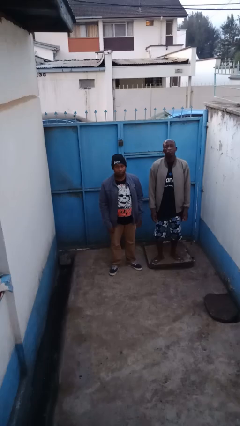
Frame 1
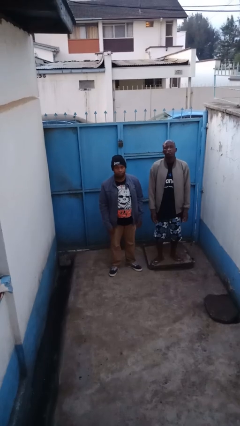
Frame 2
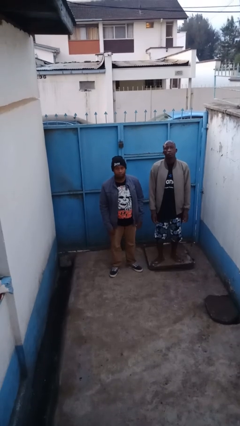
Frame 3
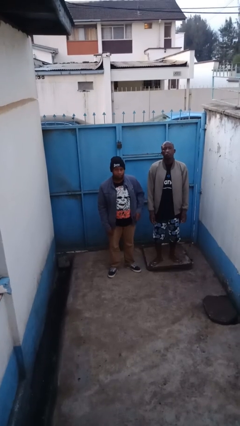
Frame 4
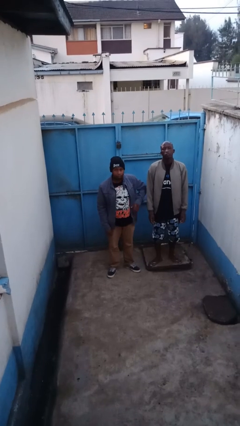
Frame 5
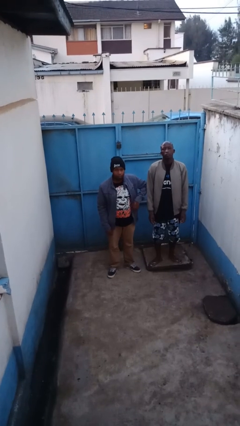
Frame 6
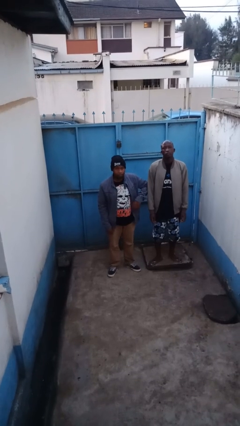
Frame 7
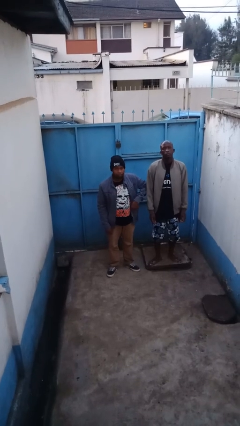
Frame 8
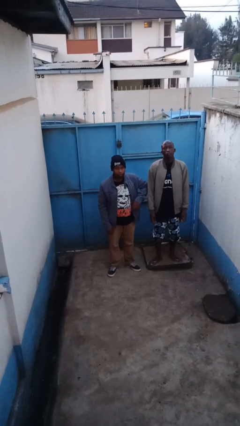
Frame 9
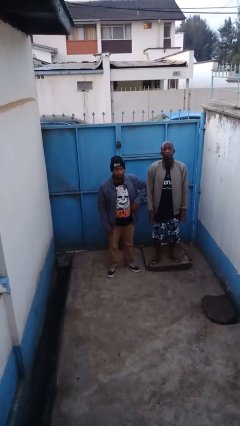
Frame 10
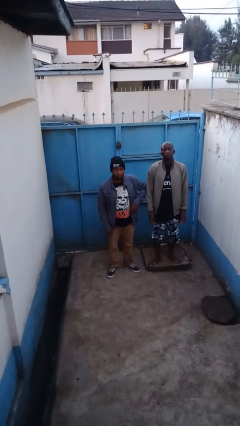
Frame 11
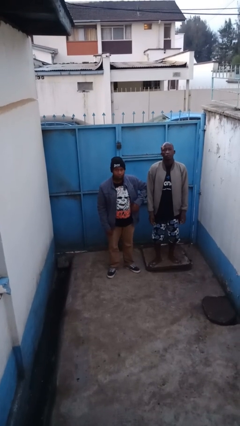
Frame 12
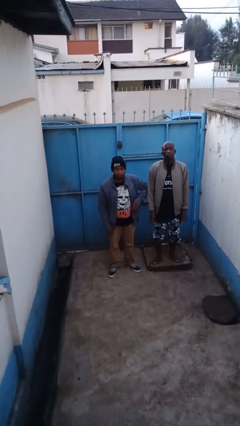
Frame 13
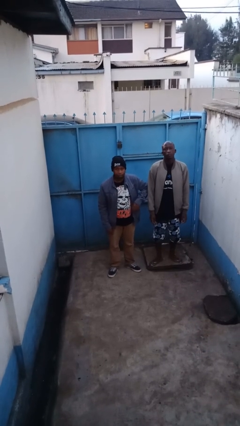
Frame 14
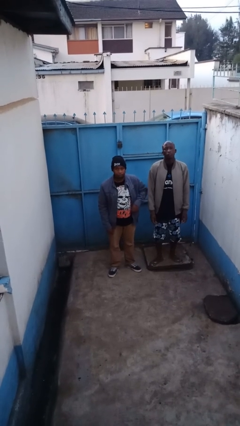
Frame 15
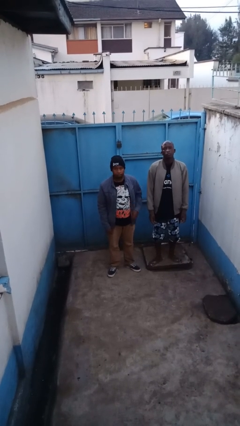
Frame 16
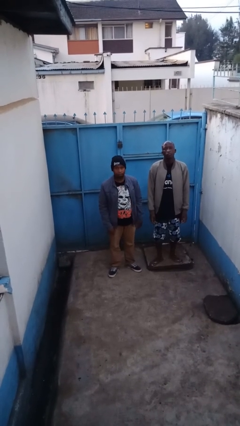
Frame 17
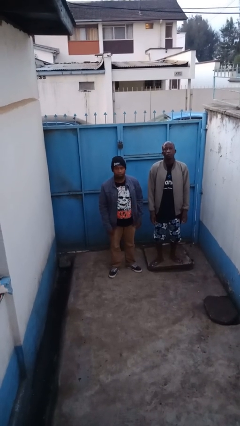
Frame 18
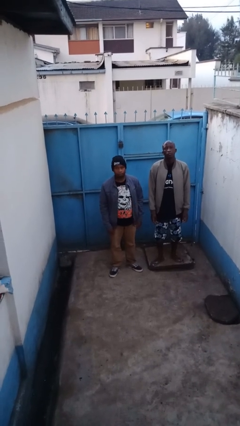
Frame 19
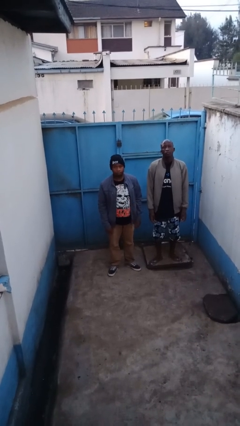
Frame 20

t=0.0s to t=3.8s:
person nudges person with elbow

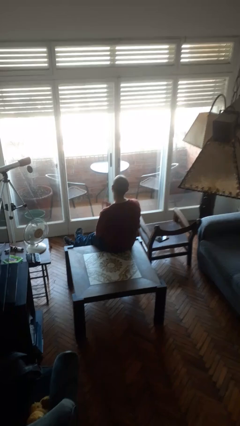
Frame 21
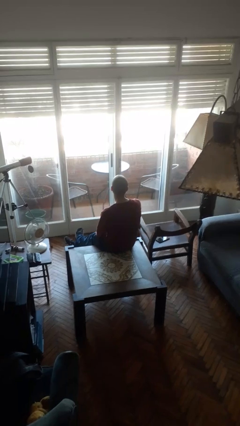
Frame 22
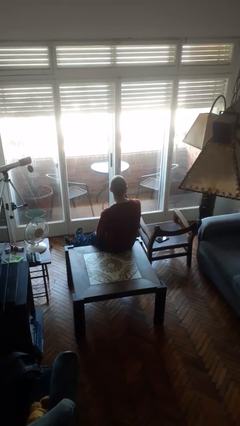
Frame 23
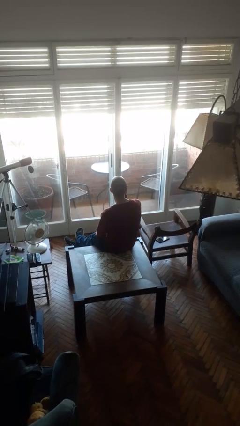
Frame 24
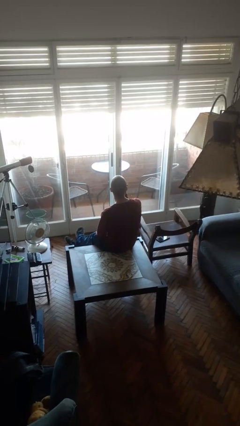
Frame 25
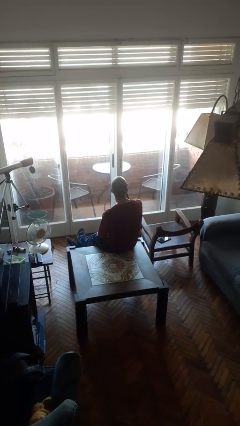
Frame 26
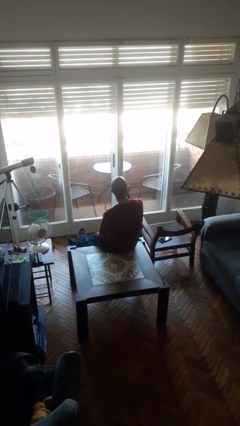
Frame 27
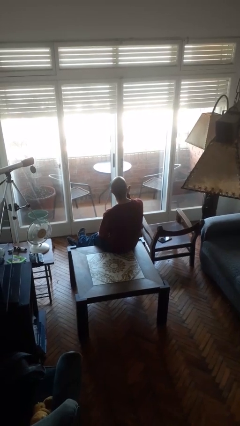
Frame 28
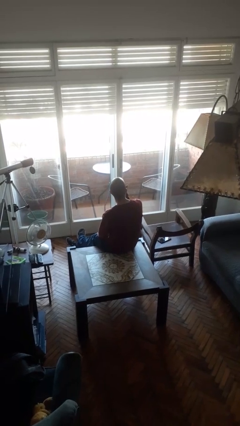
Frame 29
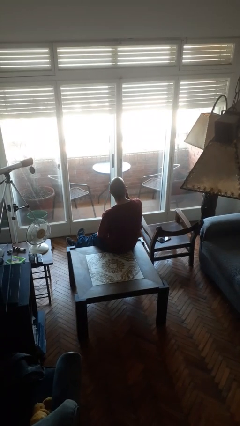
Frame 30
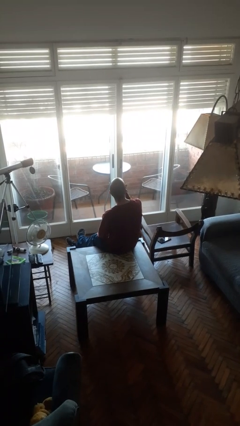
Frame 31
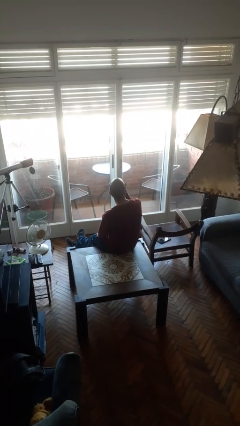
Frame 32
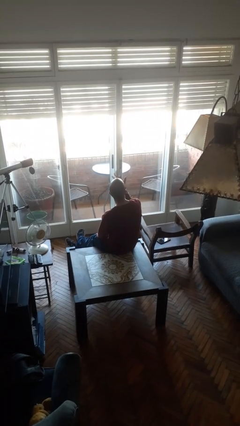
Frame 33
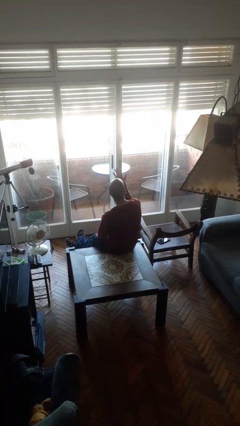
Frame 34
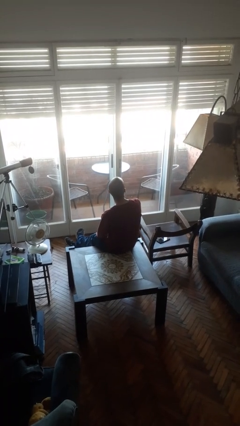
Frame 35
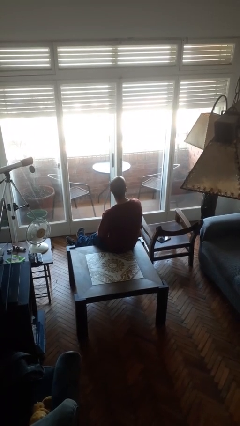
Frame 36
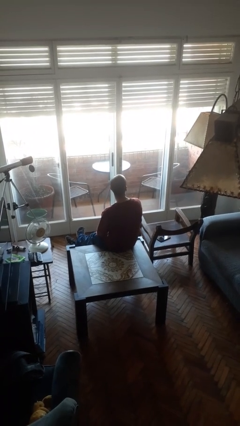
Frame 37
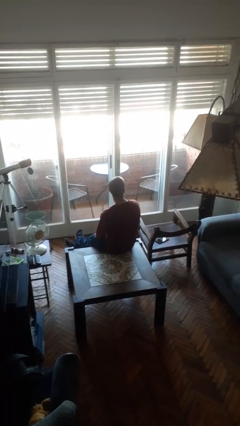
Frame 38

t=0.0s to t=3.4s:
person licks fingers

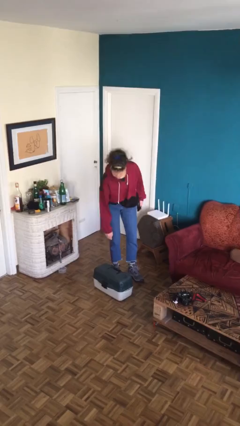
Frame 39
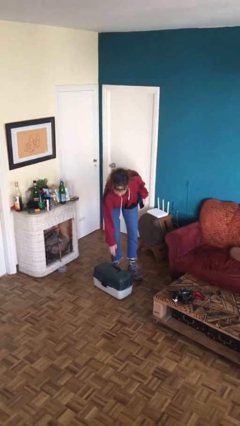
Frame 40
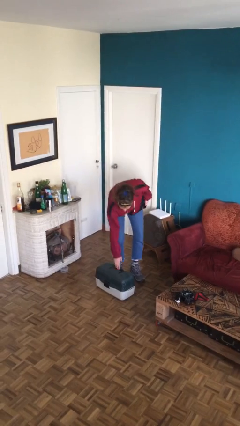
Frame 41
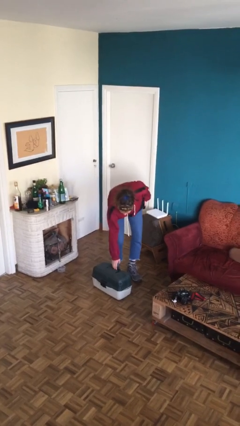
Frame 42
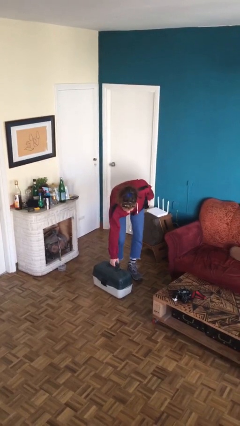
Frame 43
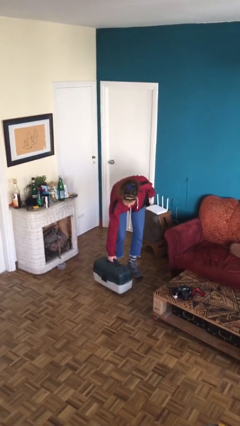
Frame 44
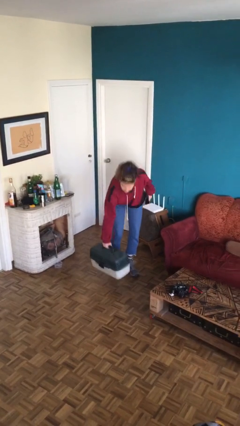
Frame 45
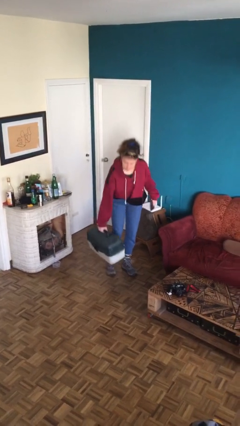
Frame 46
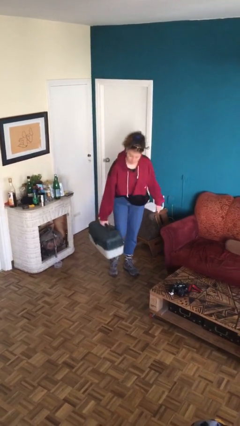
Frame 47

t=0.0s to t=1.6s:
person picks up object from floor

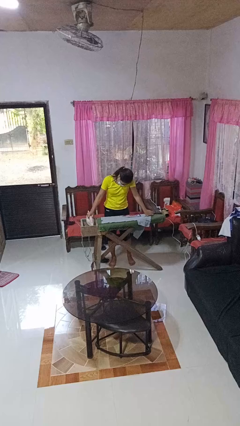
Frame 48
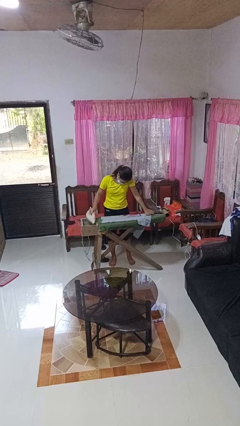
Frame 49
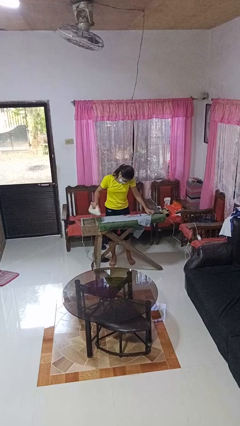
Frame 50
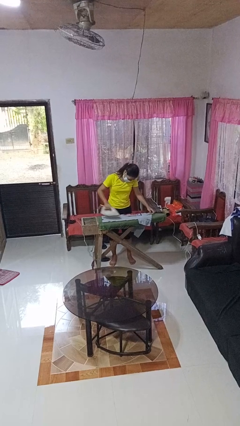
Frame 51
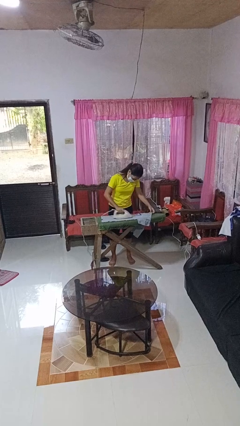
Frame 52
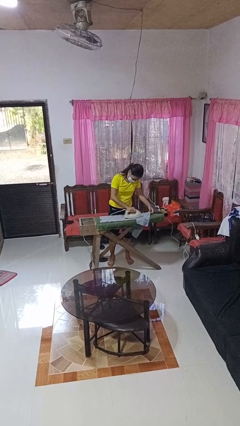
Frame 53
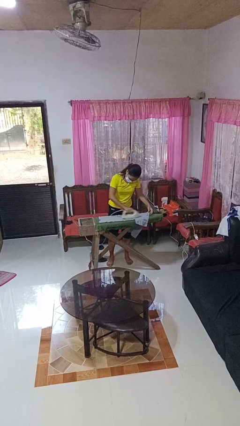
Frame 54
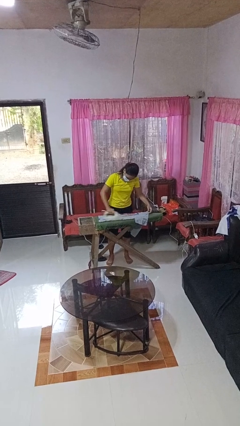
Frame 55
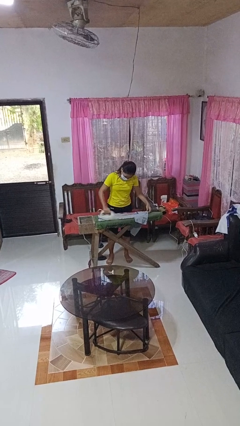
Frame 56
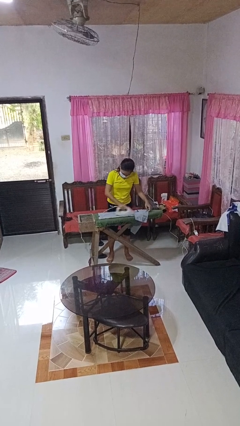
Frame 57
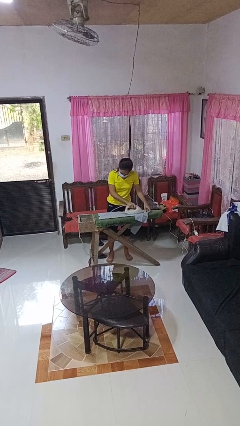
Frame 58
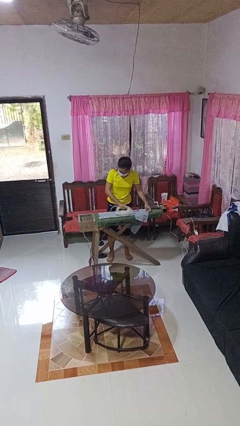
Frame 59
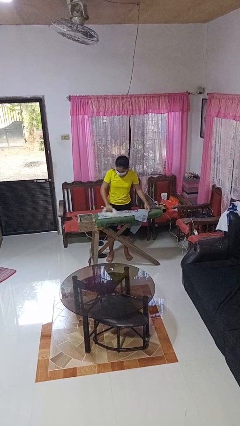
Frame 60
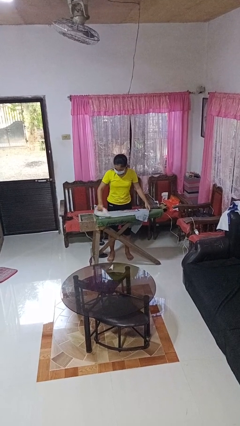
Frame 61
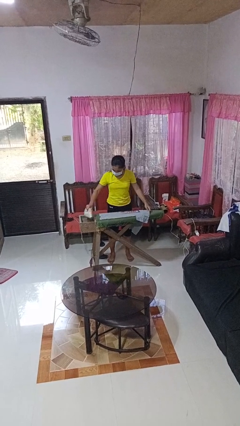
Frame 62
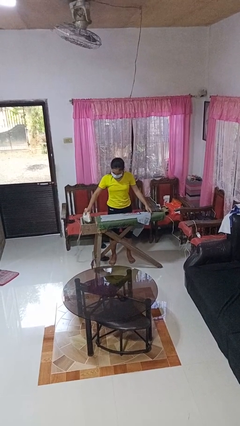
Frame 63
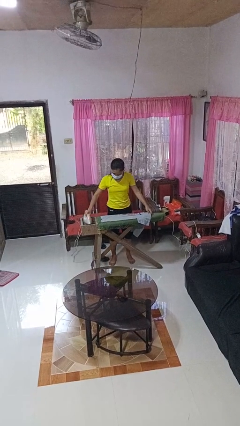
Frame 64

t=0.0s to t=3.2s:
person irons clothes

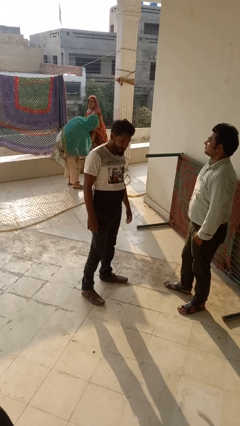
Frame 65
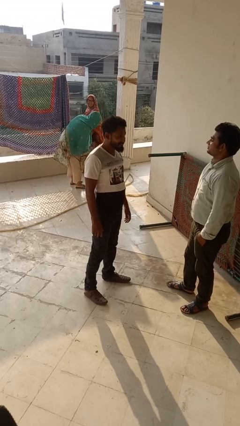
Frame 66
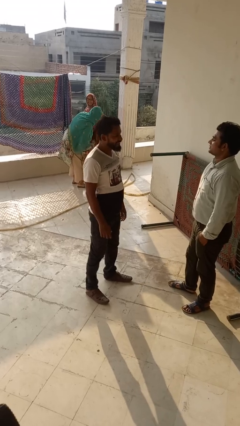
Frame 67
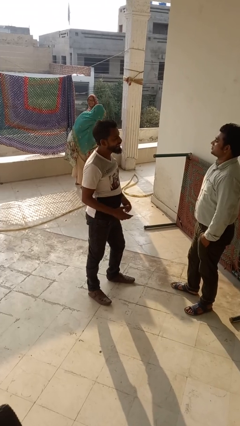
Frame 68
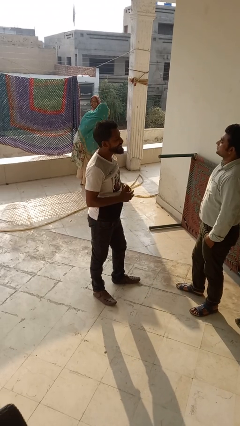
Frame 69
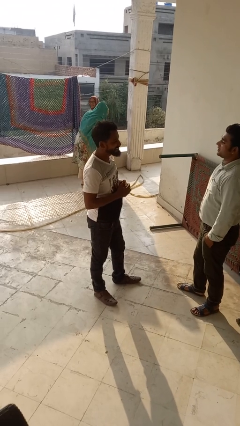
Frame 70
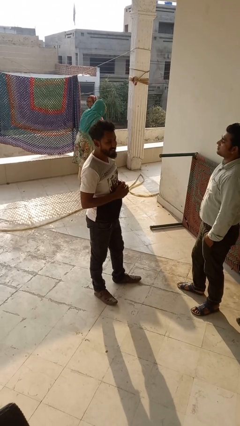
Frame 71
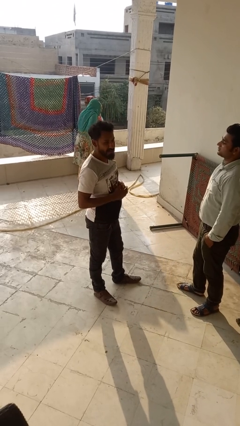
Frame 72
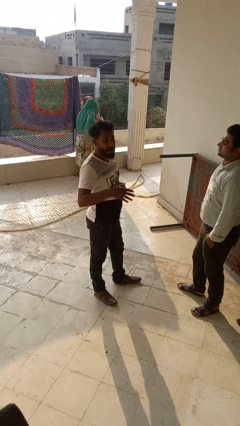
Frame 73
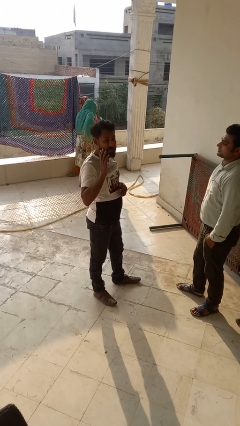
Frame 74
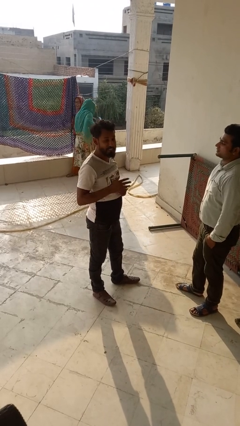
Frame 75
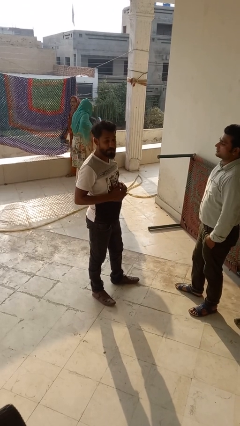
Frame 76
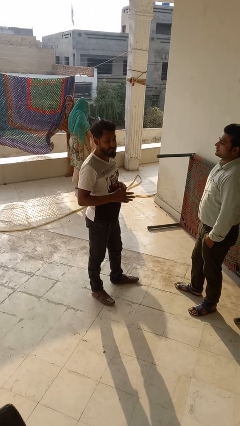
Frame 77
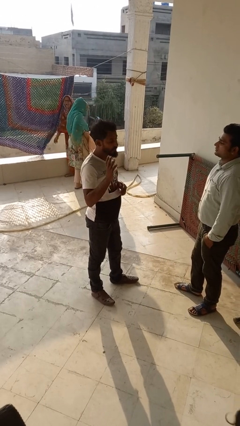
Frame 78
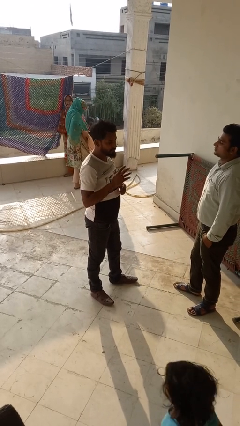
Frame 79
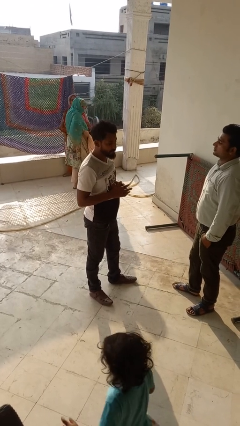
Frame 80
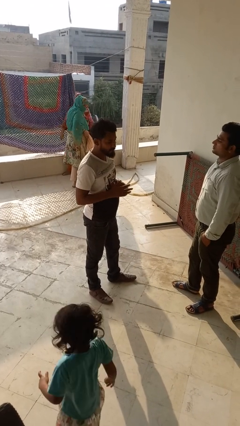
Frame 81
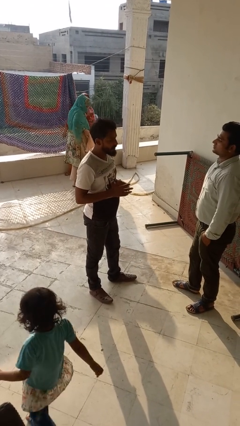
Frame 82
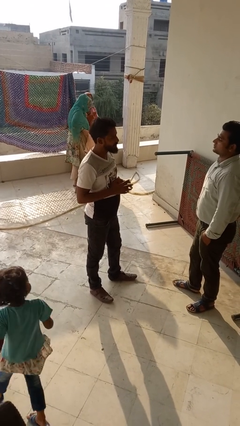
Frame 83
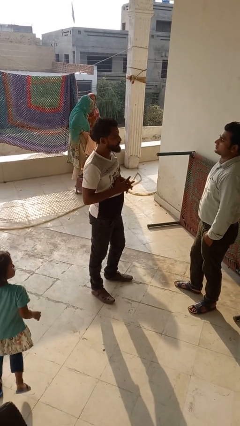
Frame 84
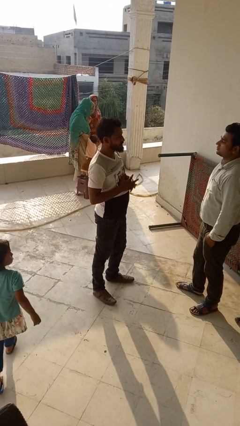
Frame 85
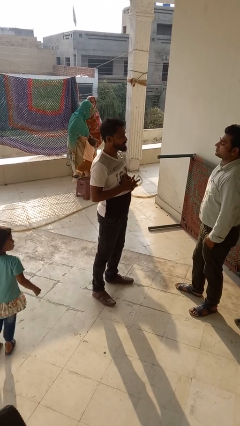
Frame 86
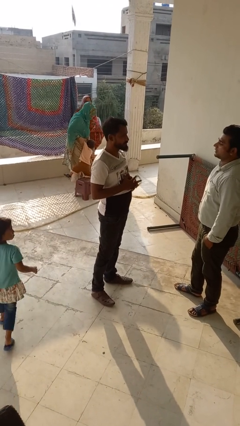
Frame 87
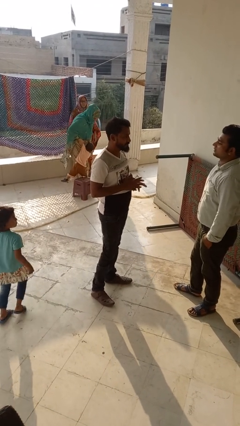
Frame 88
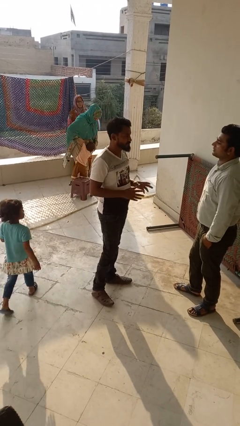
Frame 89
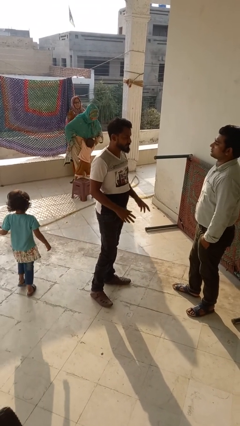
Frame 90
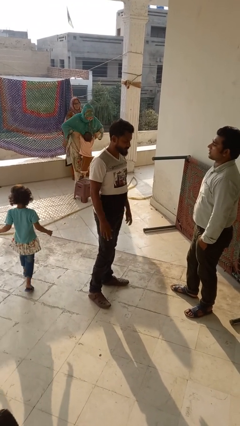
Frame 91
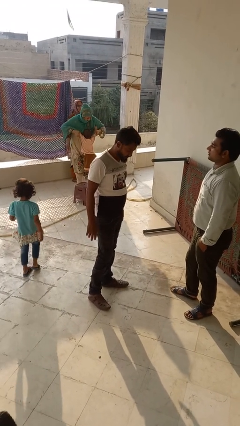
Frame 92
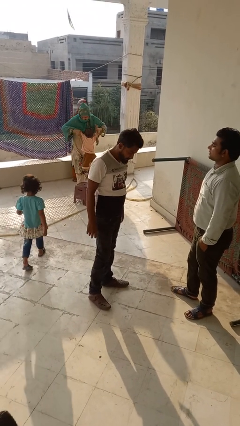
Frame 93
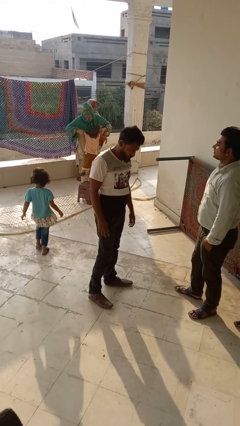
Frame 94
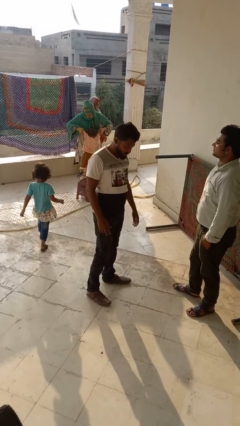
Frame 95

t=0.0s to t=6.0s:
person talks to person
